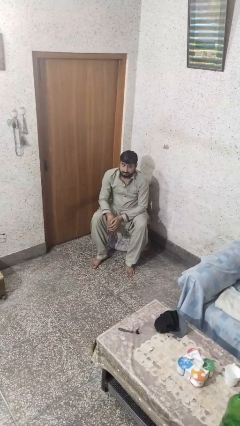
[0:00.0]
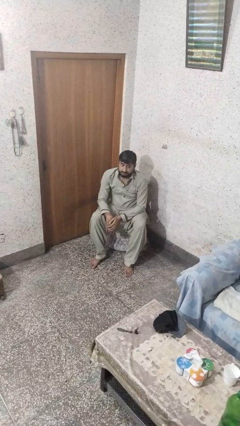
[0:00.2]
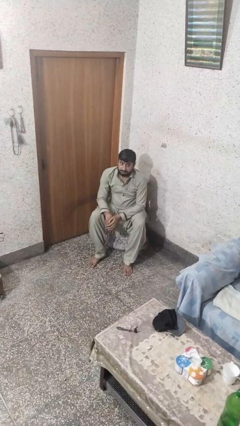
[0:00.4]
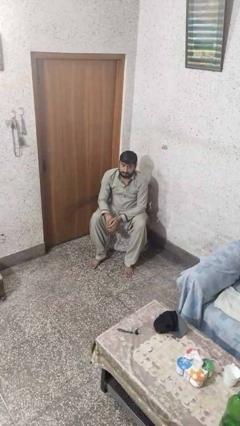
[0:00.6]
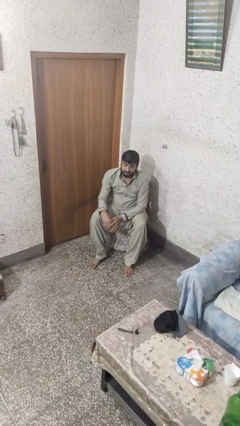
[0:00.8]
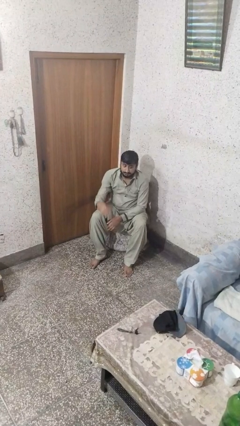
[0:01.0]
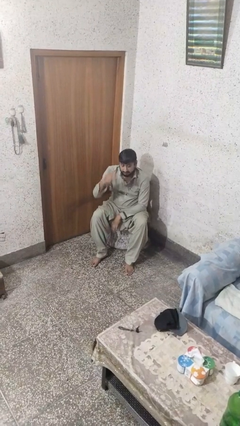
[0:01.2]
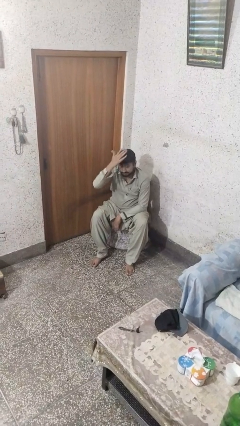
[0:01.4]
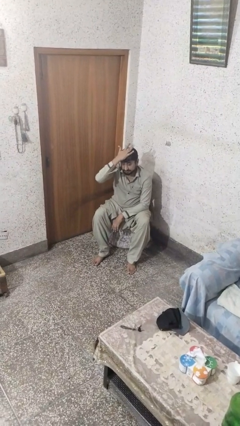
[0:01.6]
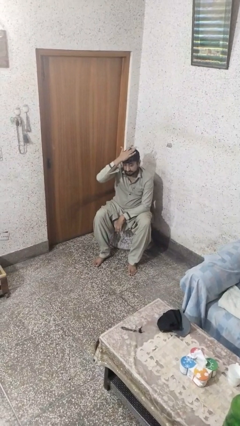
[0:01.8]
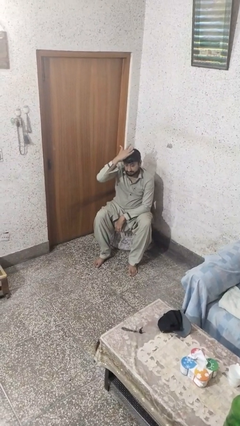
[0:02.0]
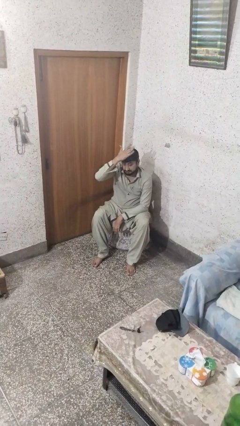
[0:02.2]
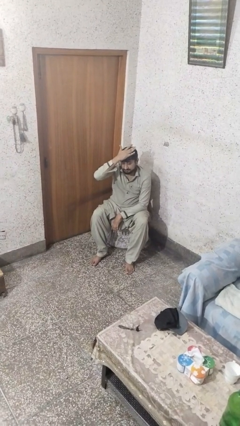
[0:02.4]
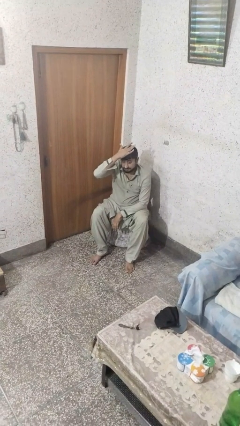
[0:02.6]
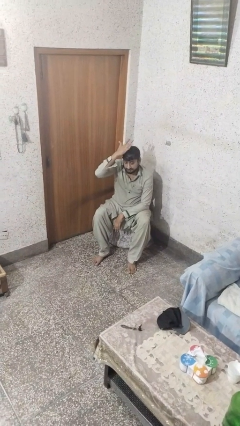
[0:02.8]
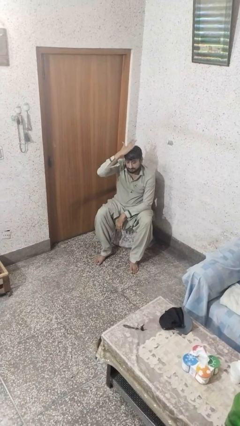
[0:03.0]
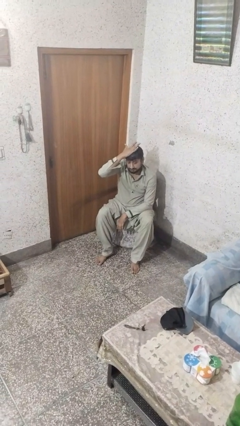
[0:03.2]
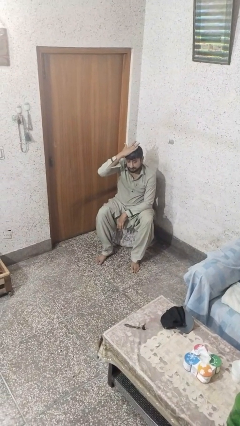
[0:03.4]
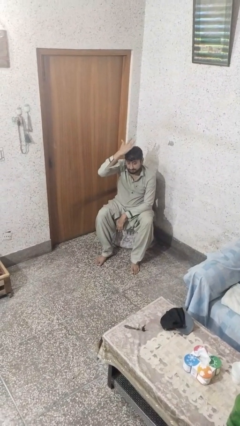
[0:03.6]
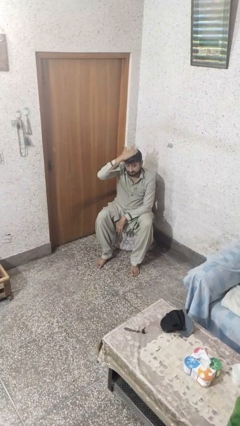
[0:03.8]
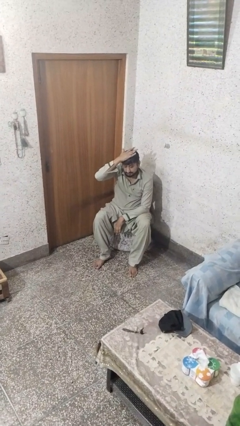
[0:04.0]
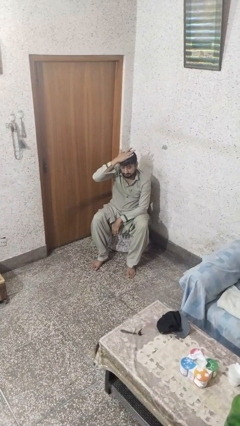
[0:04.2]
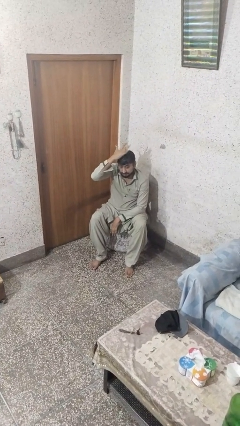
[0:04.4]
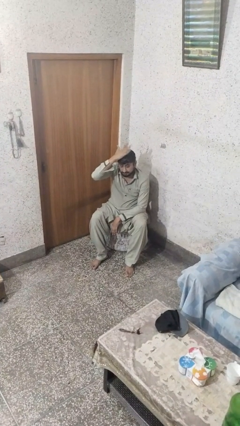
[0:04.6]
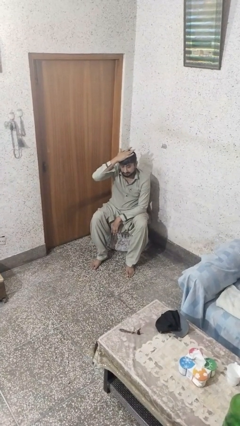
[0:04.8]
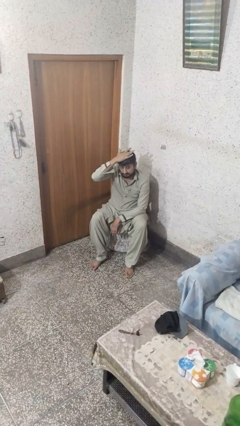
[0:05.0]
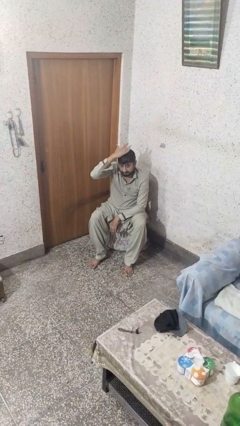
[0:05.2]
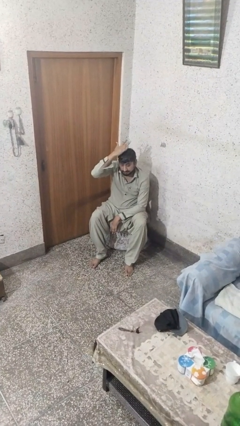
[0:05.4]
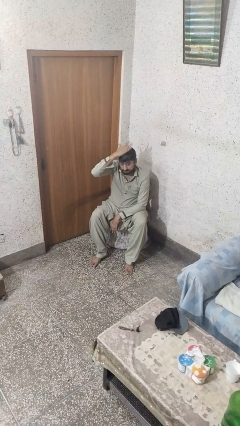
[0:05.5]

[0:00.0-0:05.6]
person pats head

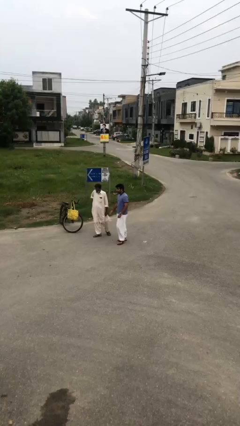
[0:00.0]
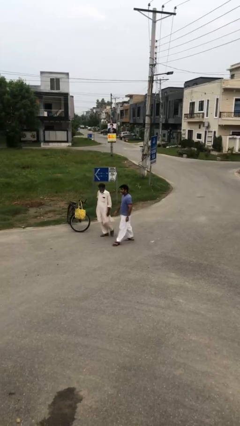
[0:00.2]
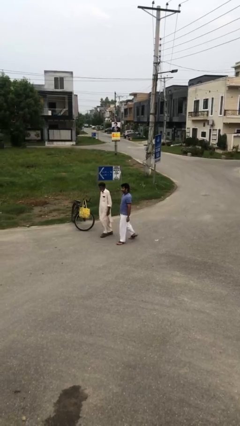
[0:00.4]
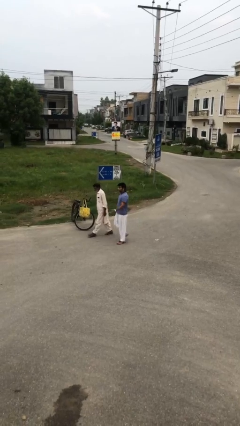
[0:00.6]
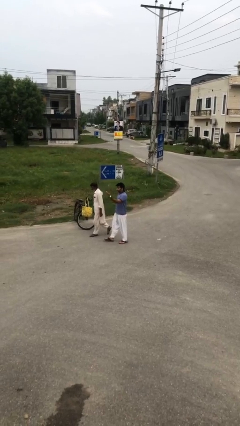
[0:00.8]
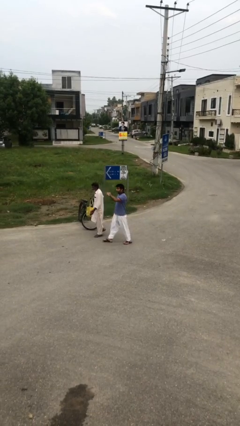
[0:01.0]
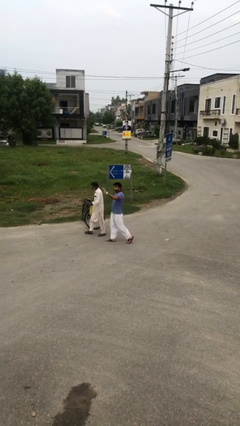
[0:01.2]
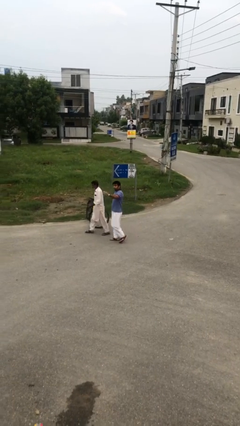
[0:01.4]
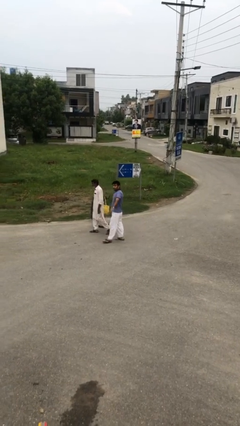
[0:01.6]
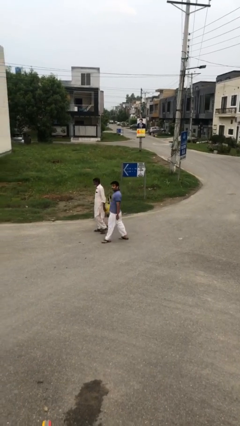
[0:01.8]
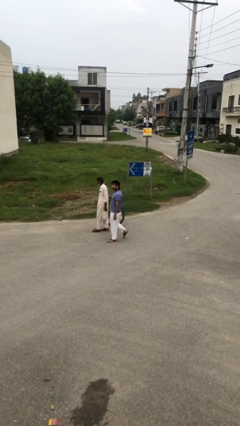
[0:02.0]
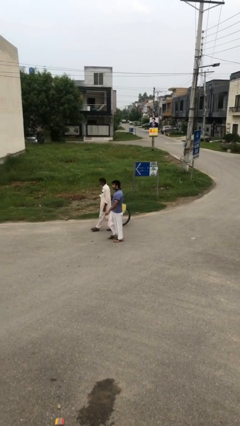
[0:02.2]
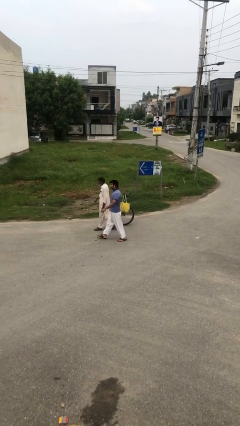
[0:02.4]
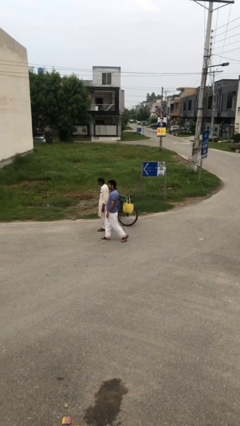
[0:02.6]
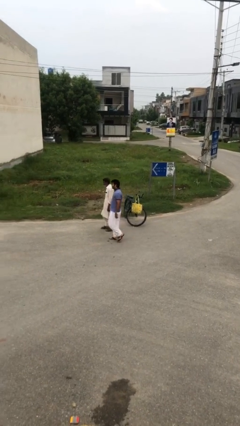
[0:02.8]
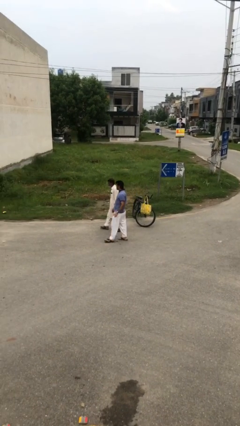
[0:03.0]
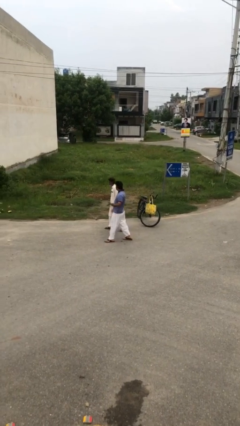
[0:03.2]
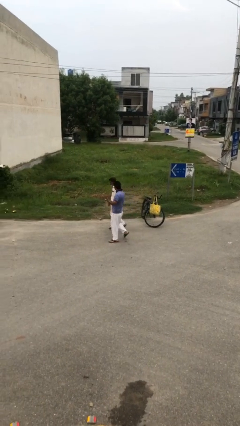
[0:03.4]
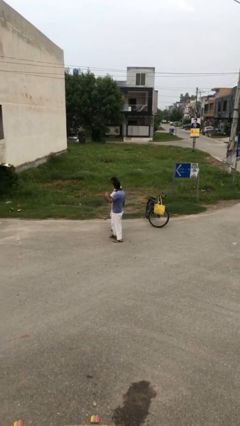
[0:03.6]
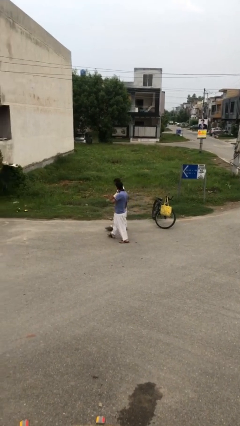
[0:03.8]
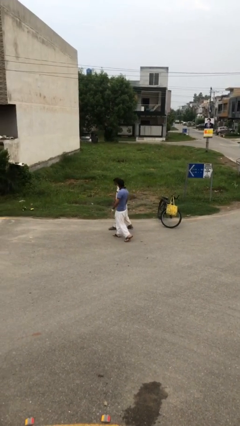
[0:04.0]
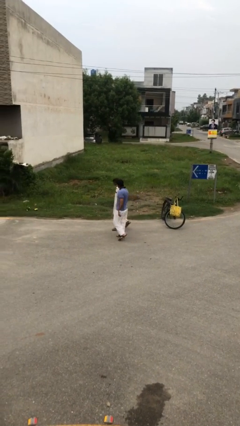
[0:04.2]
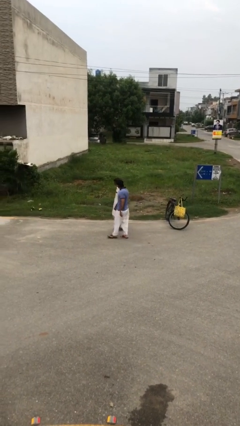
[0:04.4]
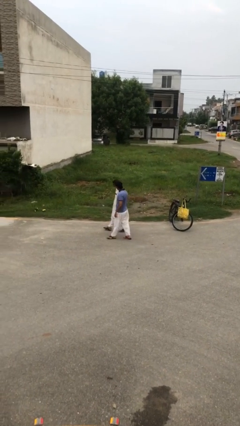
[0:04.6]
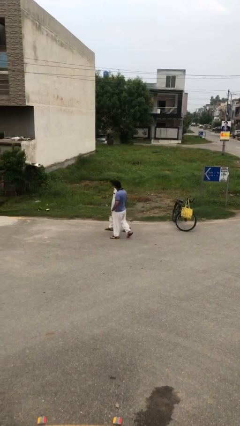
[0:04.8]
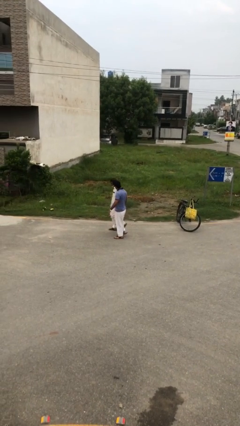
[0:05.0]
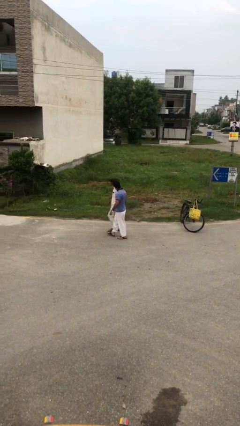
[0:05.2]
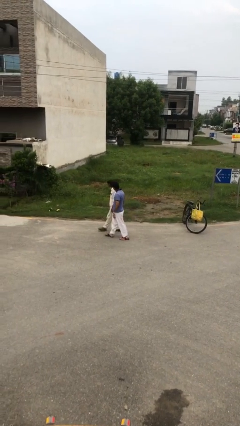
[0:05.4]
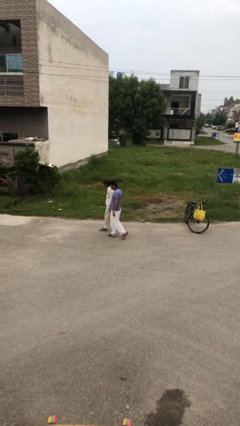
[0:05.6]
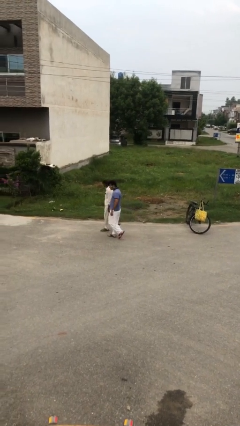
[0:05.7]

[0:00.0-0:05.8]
person talks to person

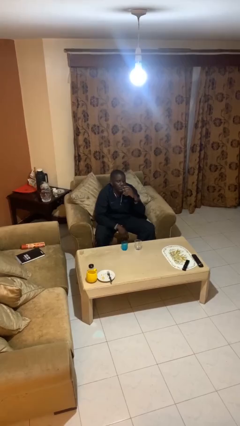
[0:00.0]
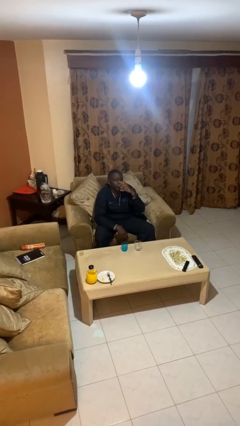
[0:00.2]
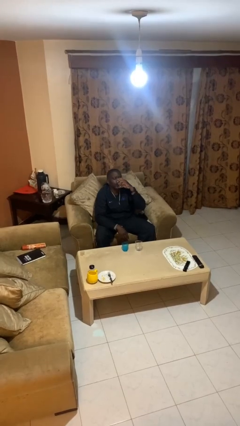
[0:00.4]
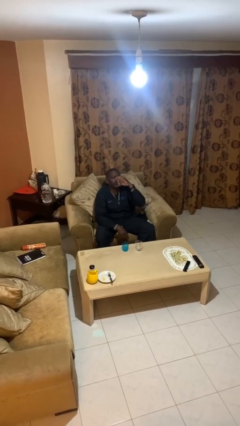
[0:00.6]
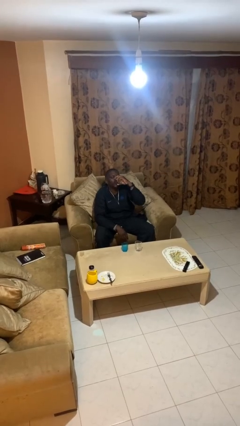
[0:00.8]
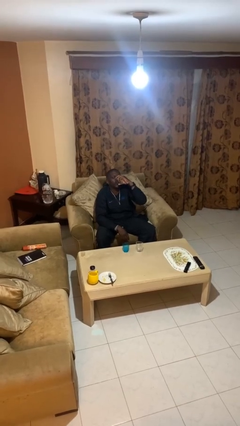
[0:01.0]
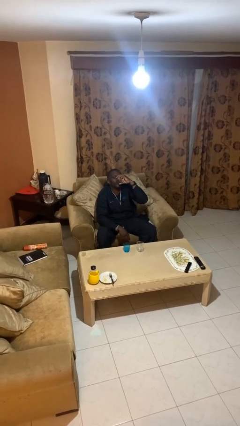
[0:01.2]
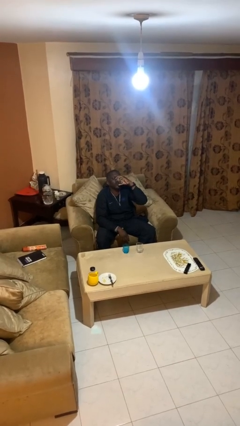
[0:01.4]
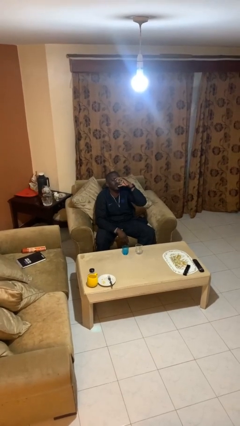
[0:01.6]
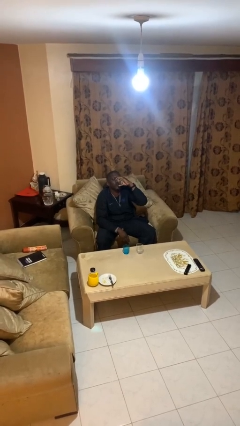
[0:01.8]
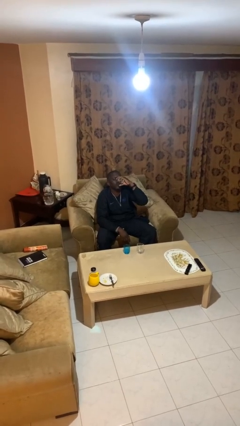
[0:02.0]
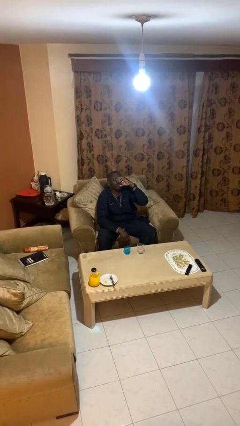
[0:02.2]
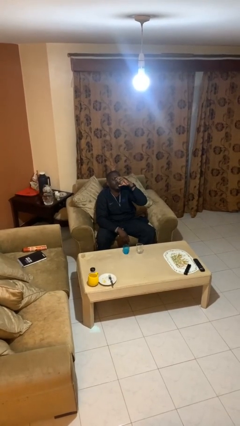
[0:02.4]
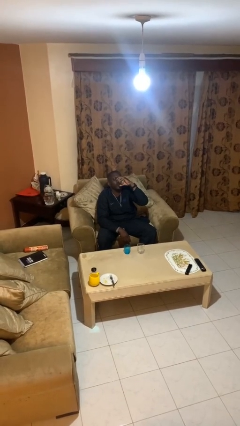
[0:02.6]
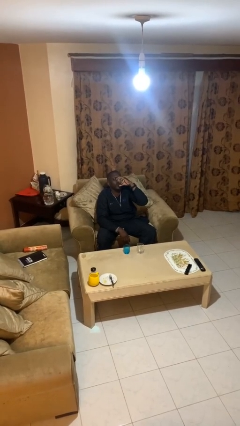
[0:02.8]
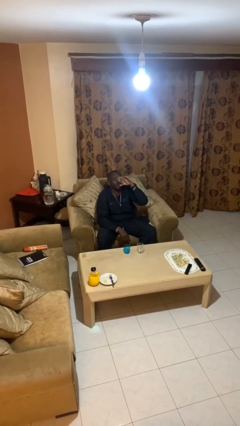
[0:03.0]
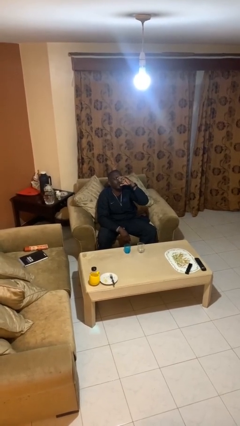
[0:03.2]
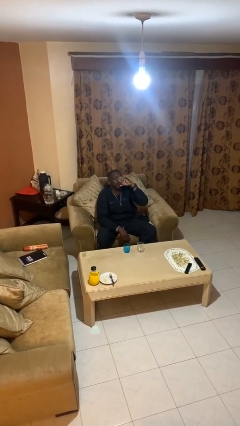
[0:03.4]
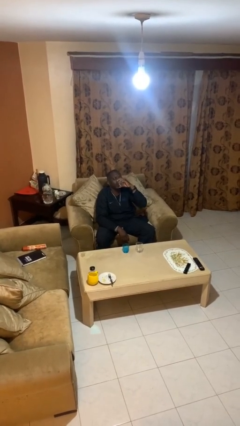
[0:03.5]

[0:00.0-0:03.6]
person drinks from shotglass

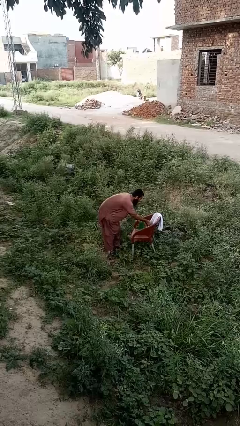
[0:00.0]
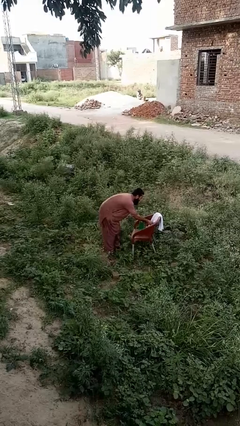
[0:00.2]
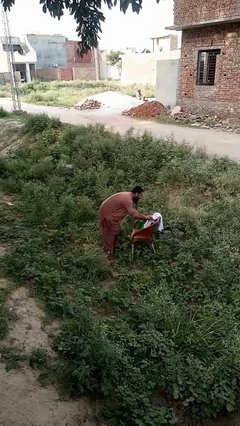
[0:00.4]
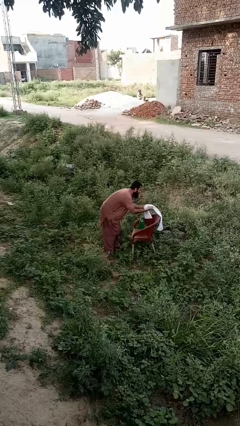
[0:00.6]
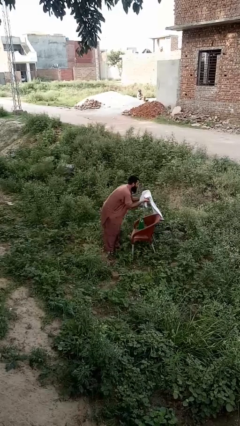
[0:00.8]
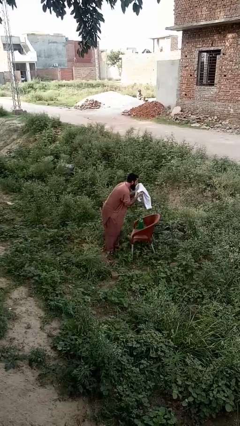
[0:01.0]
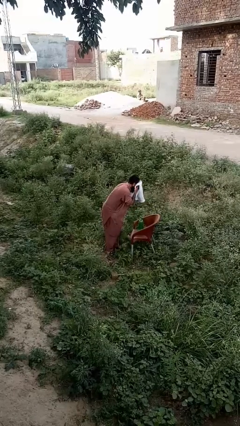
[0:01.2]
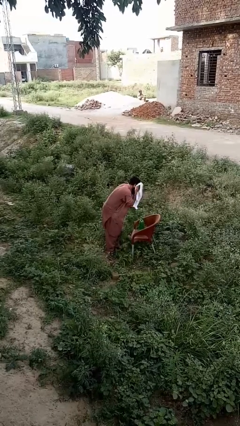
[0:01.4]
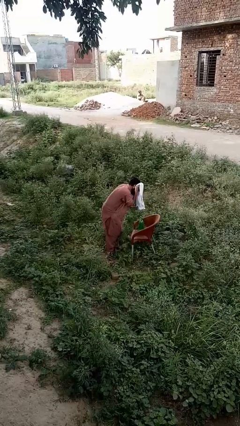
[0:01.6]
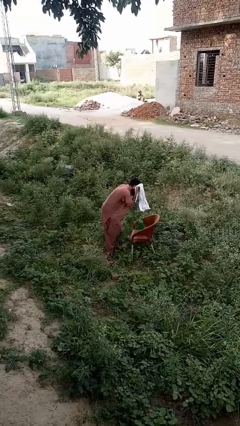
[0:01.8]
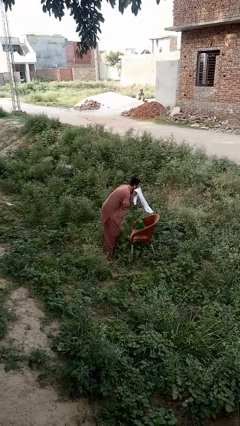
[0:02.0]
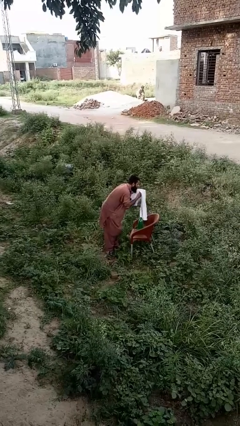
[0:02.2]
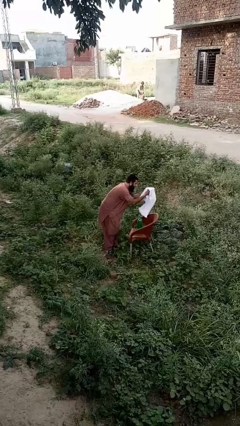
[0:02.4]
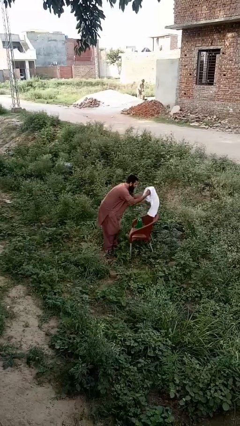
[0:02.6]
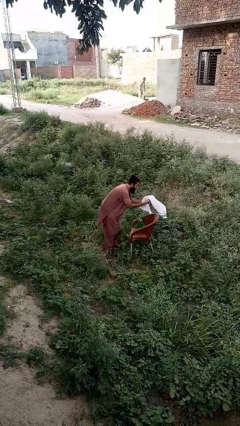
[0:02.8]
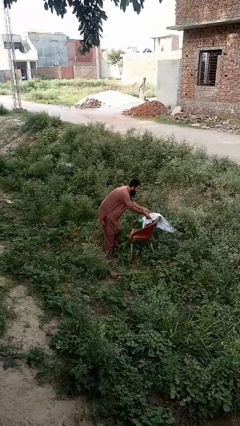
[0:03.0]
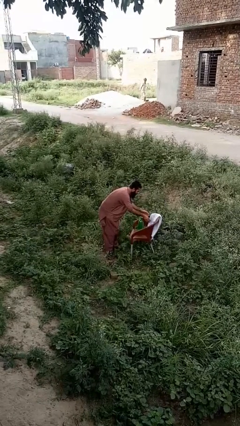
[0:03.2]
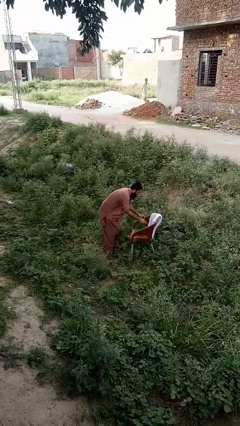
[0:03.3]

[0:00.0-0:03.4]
person dries face with towel
